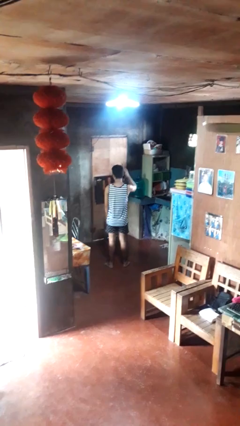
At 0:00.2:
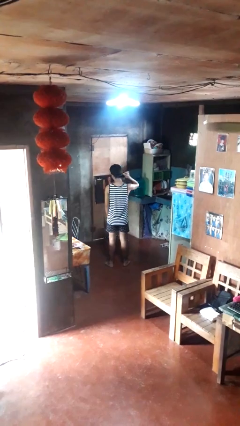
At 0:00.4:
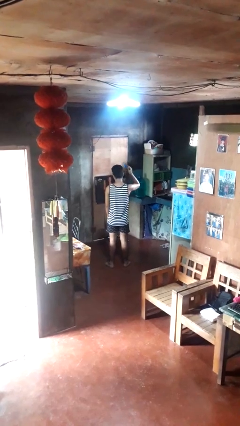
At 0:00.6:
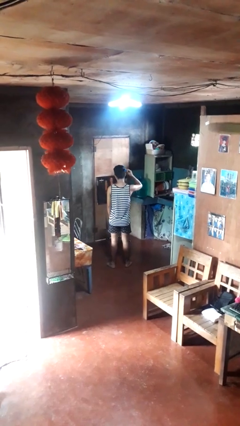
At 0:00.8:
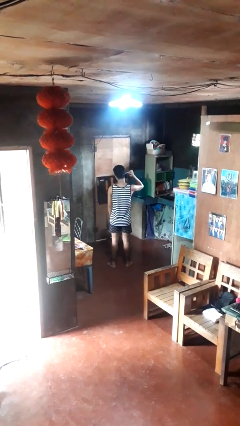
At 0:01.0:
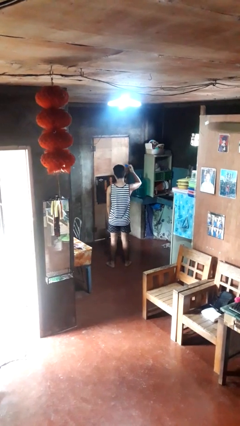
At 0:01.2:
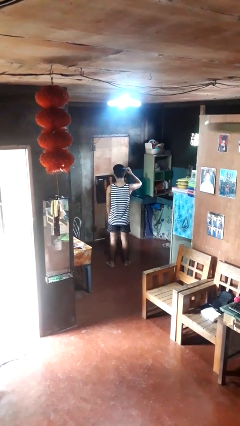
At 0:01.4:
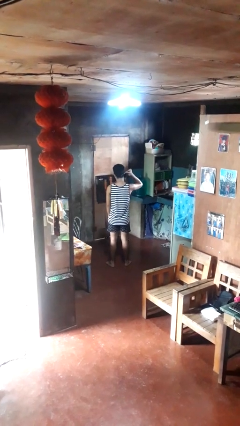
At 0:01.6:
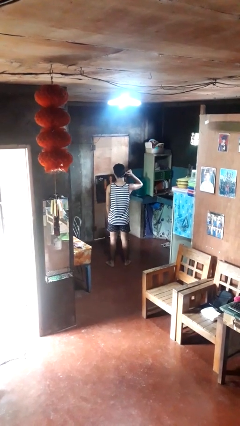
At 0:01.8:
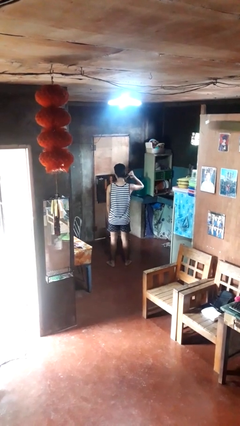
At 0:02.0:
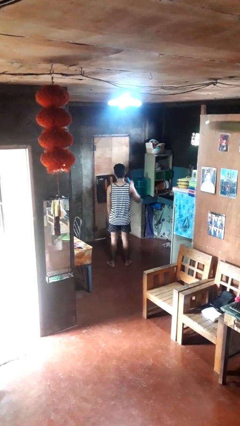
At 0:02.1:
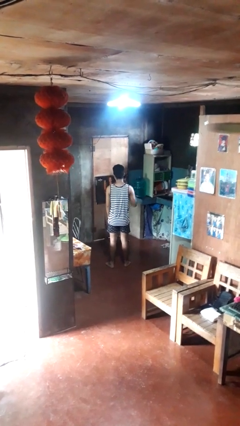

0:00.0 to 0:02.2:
person brushes hair

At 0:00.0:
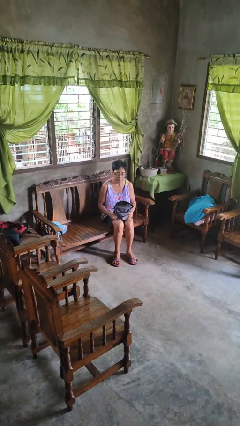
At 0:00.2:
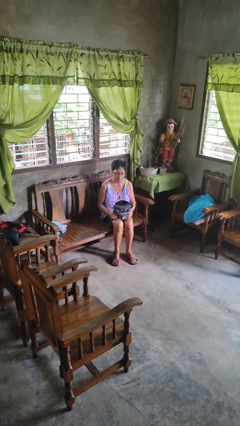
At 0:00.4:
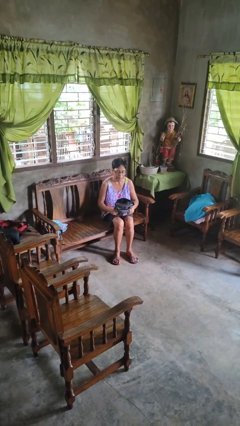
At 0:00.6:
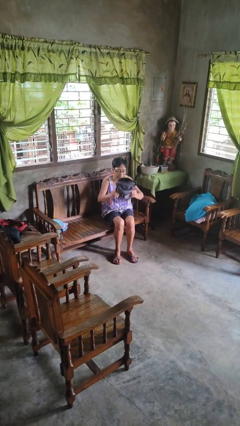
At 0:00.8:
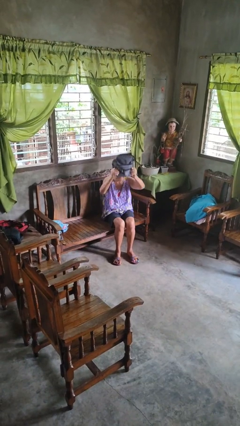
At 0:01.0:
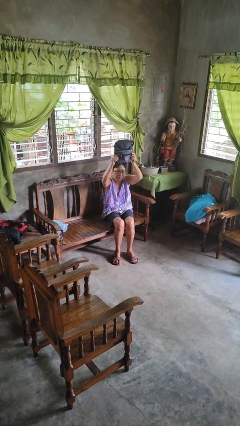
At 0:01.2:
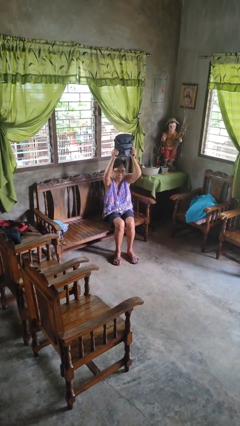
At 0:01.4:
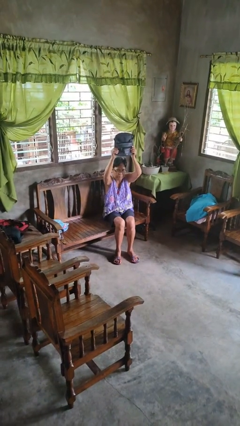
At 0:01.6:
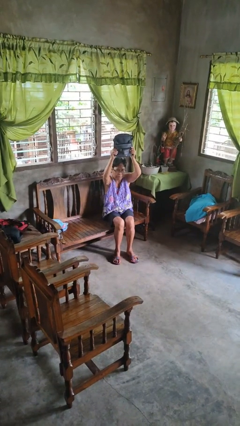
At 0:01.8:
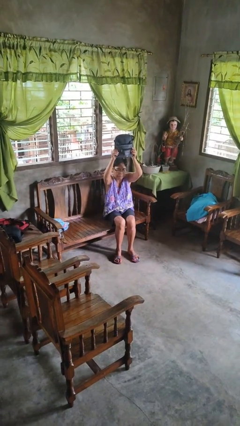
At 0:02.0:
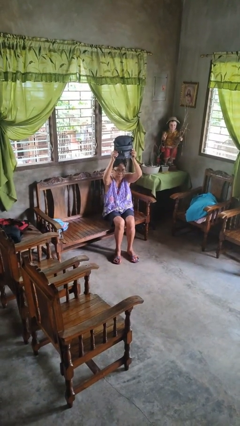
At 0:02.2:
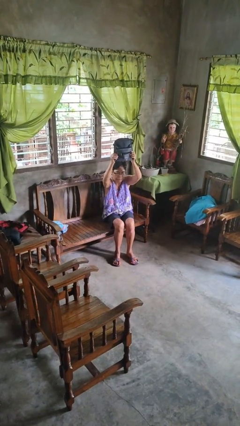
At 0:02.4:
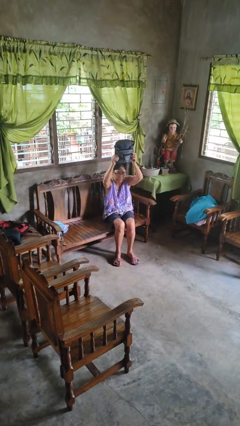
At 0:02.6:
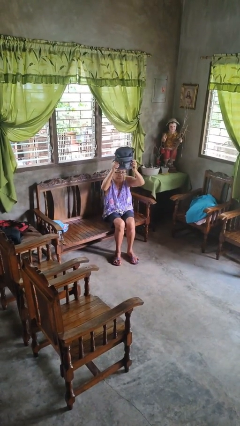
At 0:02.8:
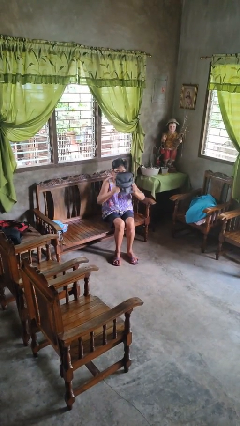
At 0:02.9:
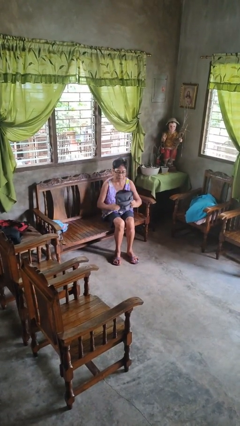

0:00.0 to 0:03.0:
person holds object above head

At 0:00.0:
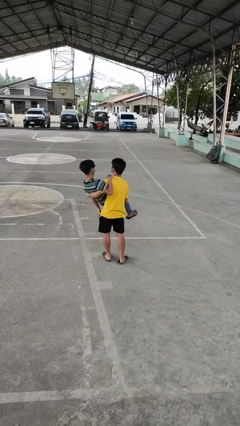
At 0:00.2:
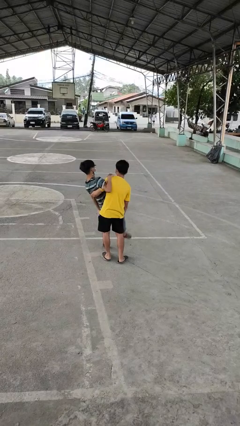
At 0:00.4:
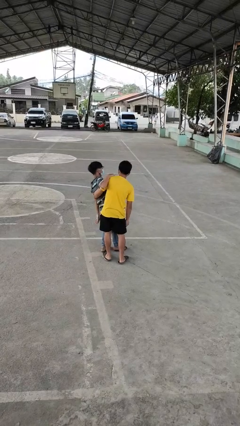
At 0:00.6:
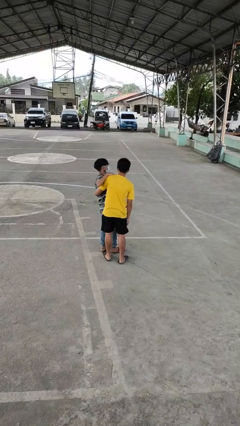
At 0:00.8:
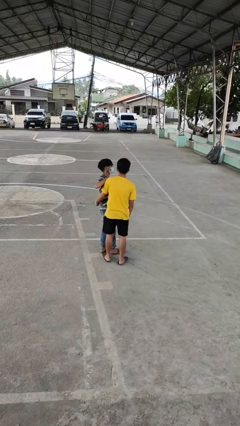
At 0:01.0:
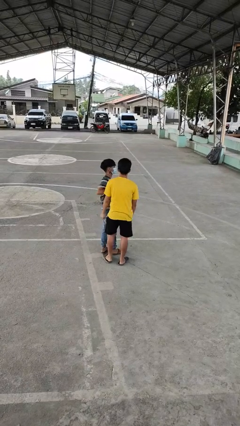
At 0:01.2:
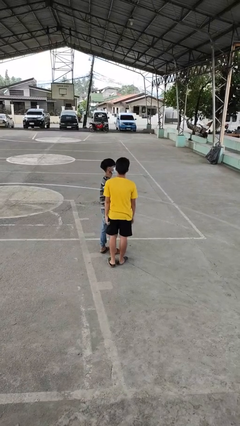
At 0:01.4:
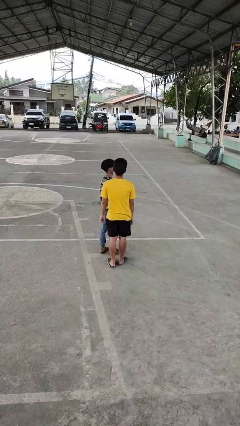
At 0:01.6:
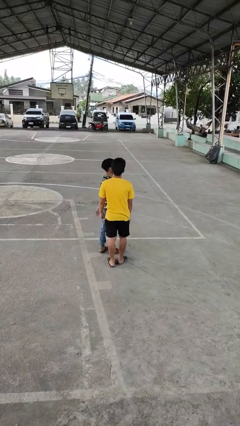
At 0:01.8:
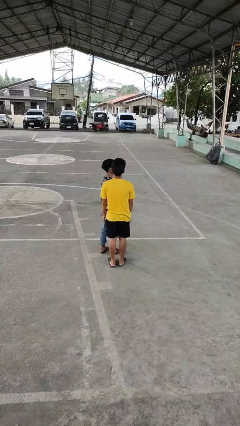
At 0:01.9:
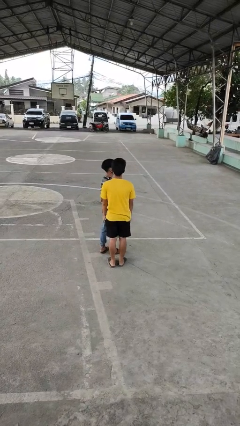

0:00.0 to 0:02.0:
person puts down person

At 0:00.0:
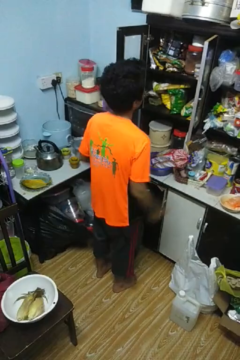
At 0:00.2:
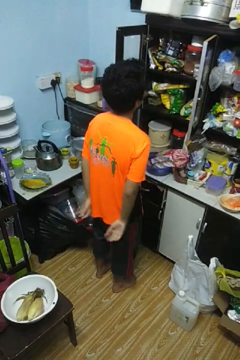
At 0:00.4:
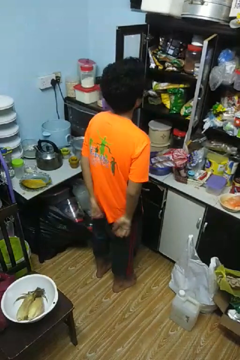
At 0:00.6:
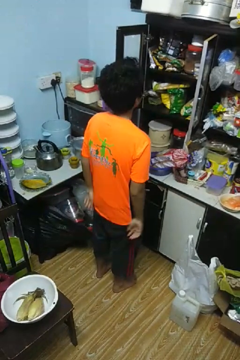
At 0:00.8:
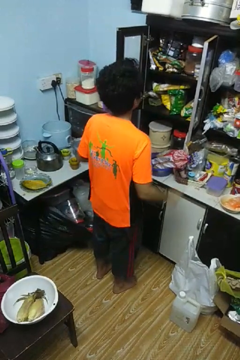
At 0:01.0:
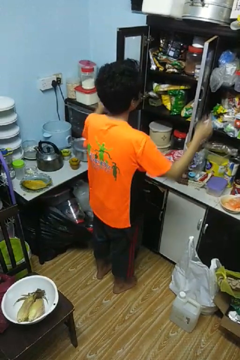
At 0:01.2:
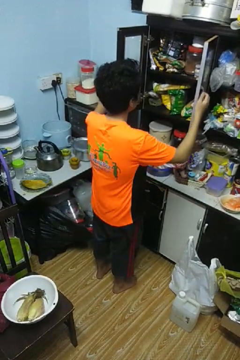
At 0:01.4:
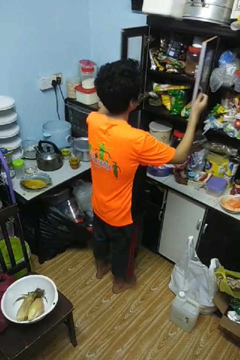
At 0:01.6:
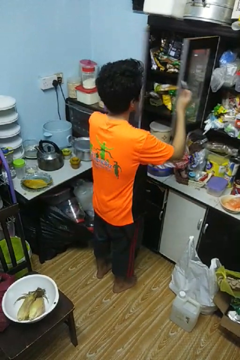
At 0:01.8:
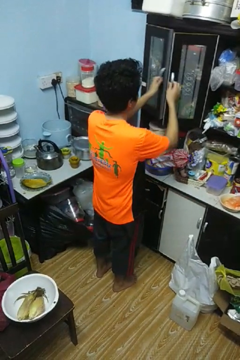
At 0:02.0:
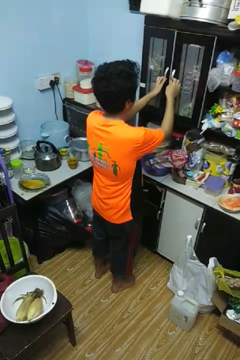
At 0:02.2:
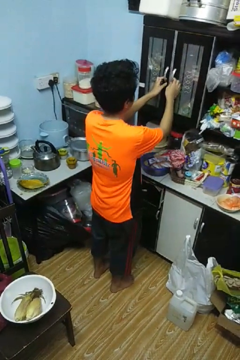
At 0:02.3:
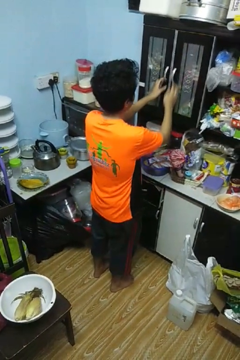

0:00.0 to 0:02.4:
person closes cabinet

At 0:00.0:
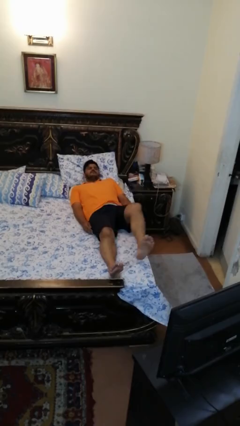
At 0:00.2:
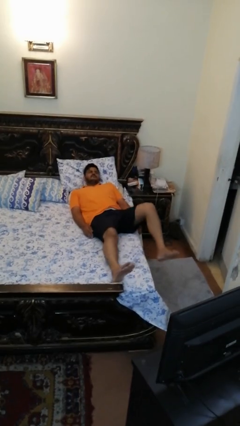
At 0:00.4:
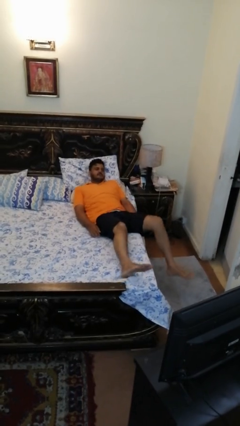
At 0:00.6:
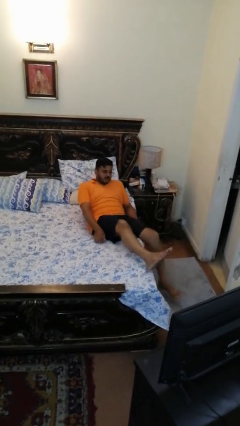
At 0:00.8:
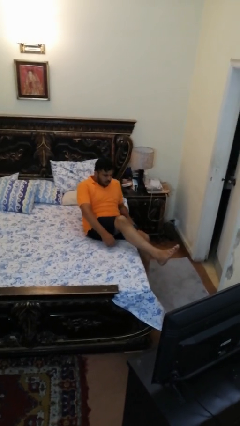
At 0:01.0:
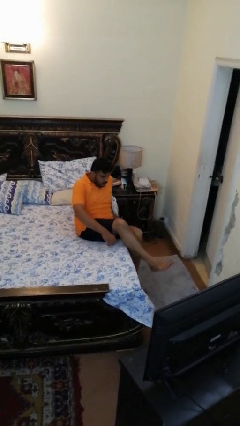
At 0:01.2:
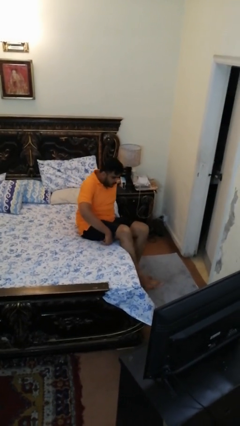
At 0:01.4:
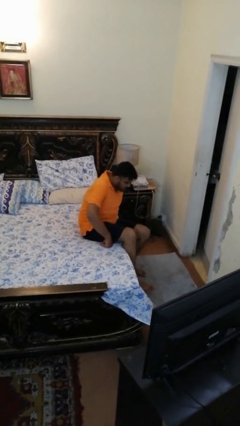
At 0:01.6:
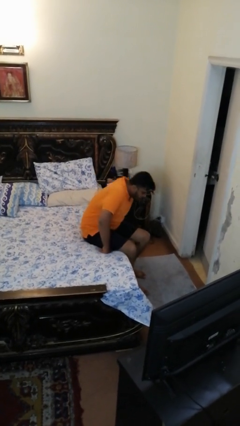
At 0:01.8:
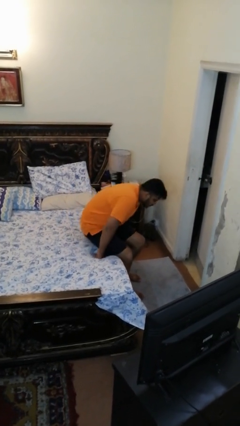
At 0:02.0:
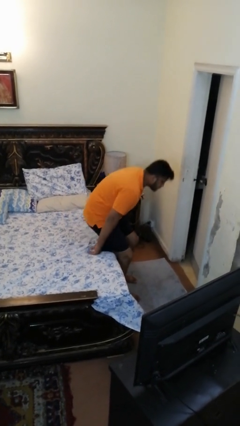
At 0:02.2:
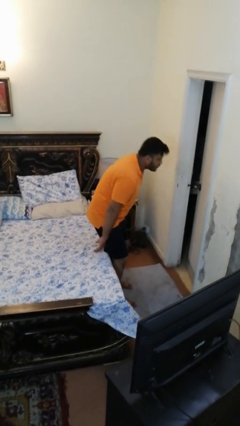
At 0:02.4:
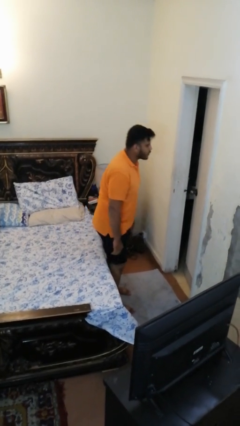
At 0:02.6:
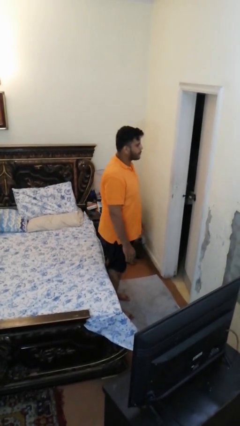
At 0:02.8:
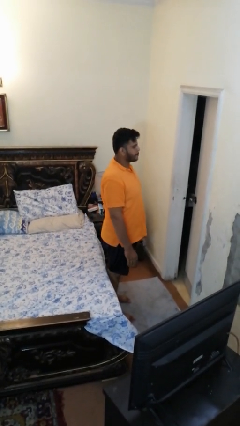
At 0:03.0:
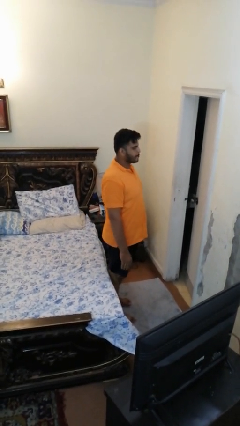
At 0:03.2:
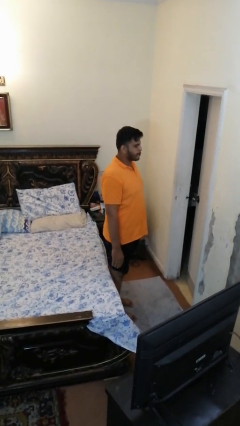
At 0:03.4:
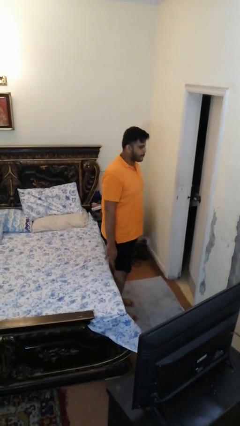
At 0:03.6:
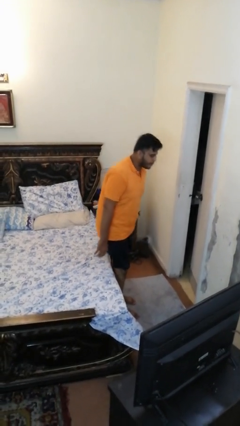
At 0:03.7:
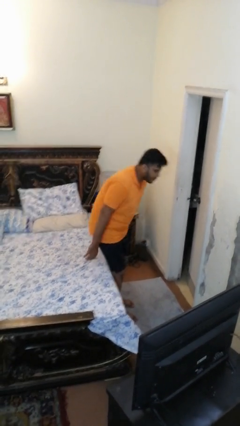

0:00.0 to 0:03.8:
person stands up

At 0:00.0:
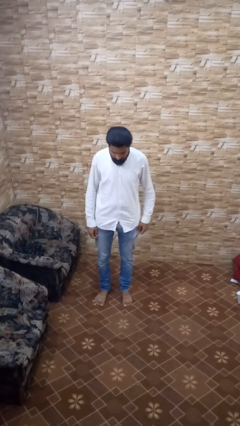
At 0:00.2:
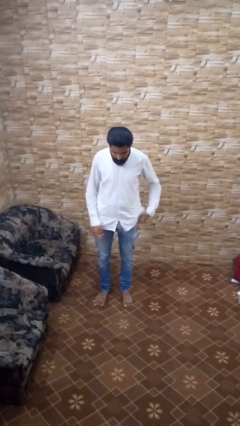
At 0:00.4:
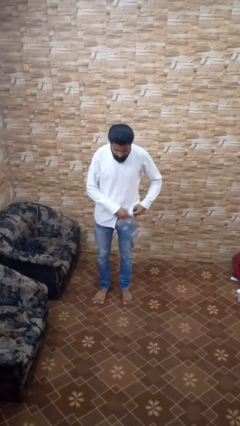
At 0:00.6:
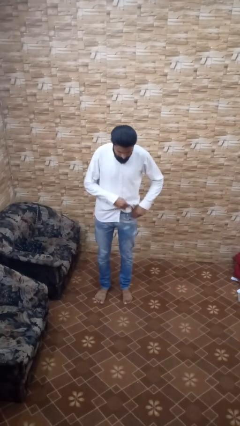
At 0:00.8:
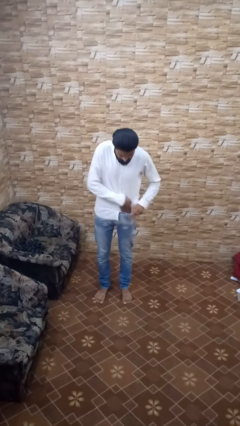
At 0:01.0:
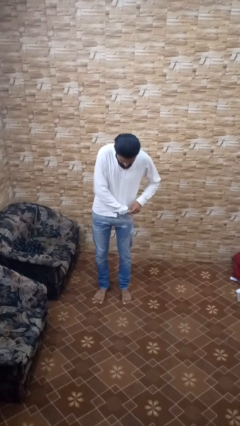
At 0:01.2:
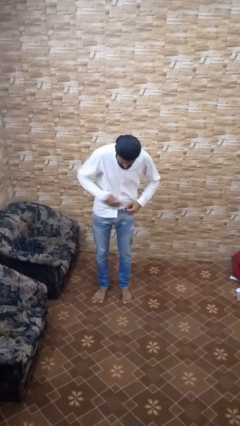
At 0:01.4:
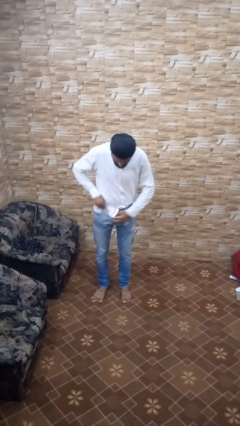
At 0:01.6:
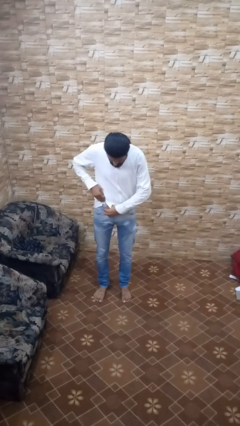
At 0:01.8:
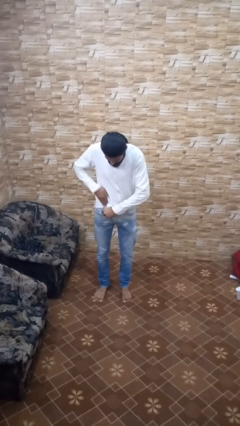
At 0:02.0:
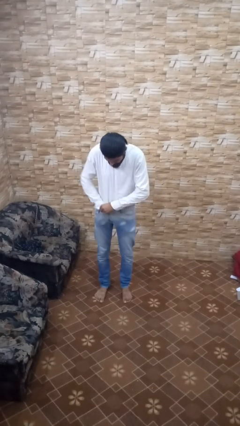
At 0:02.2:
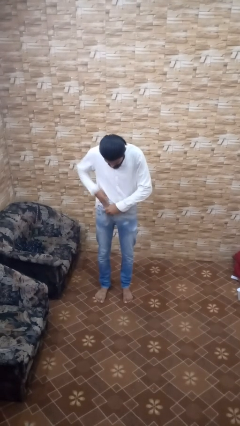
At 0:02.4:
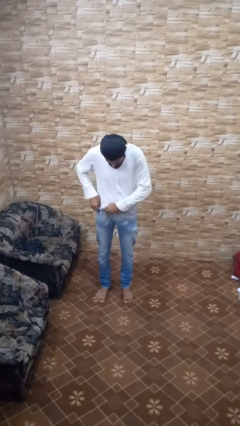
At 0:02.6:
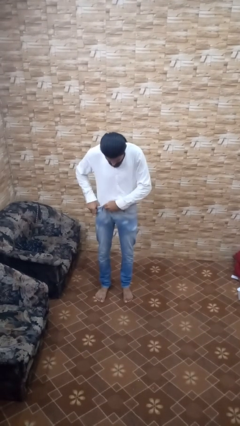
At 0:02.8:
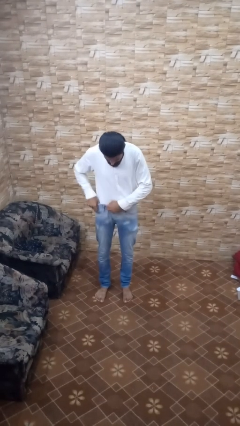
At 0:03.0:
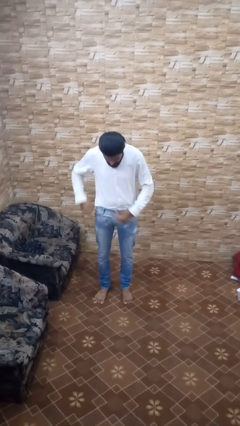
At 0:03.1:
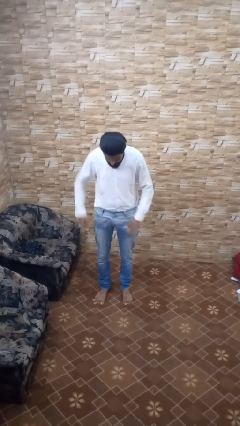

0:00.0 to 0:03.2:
person tucks in shirt

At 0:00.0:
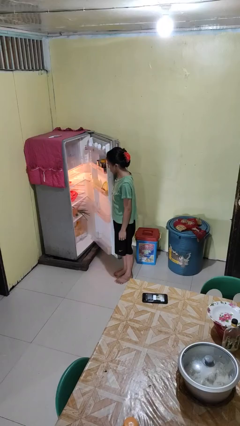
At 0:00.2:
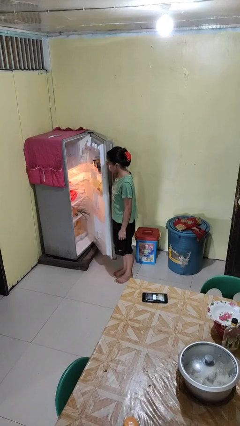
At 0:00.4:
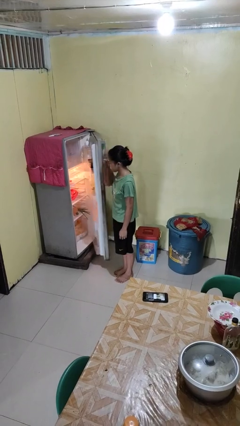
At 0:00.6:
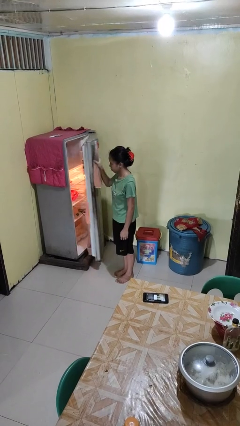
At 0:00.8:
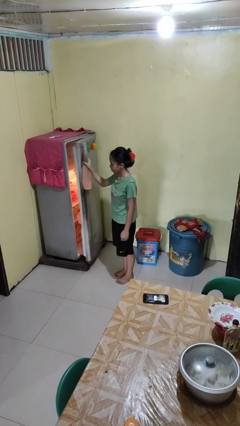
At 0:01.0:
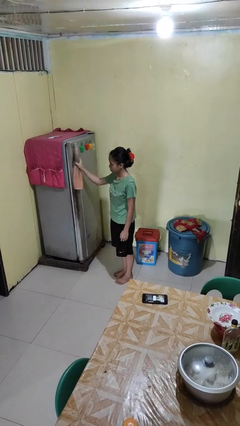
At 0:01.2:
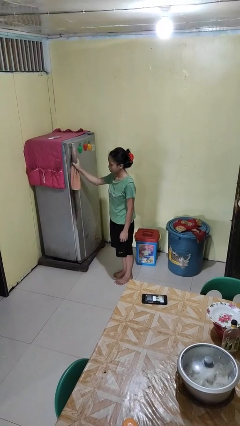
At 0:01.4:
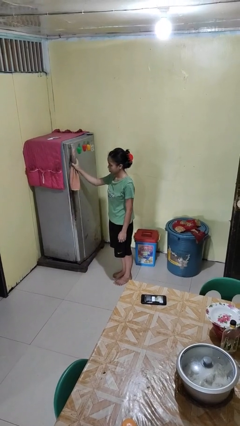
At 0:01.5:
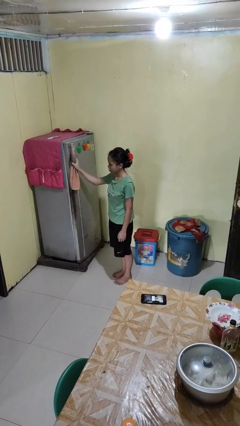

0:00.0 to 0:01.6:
person closes refrigerator
